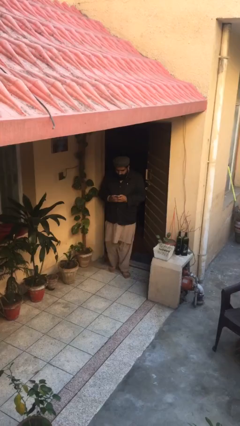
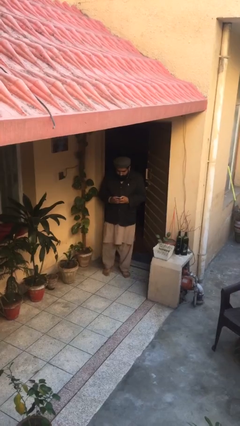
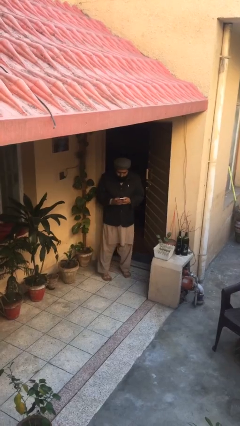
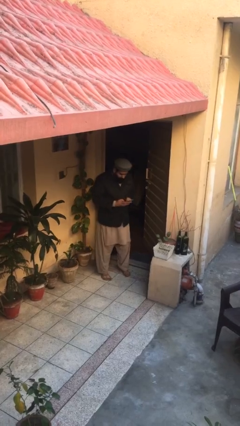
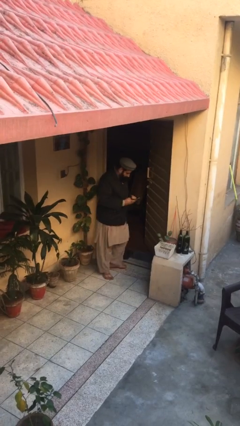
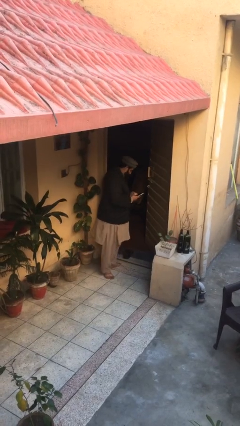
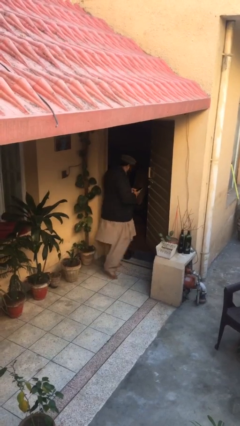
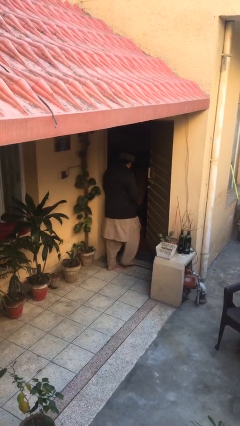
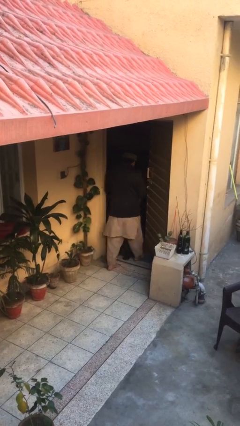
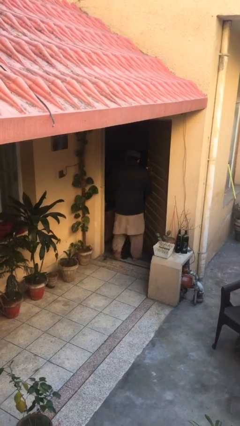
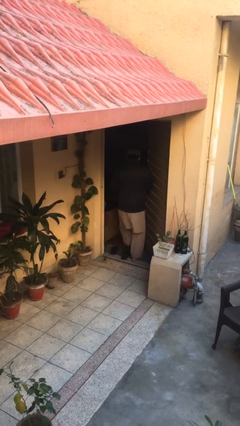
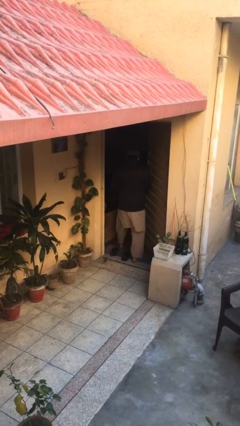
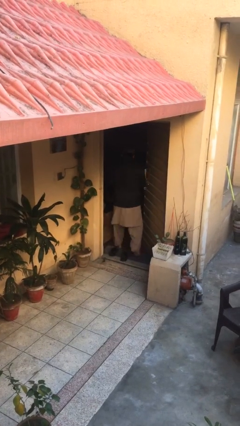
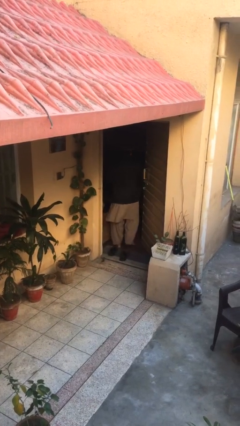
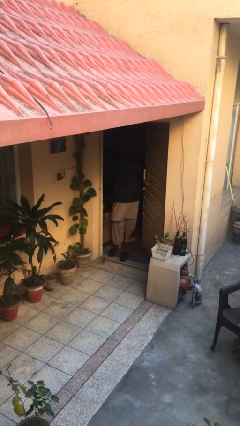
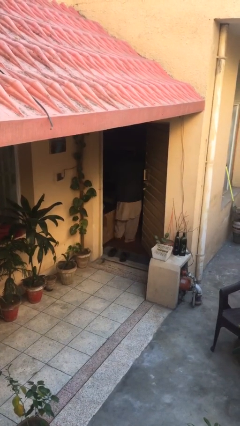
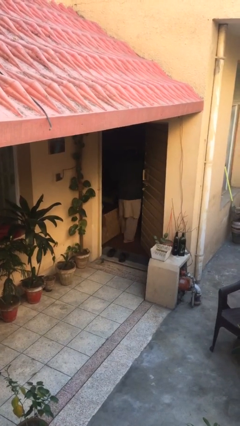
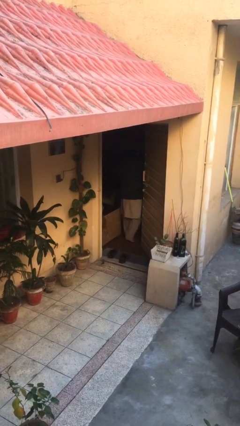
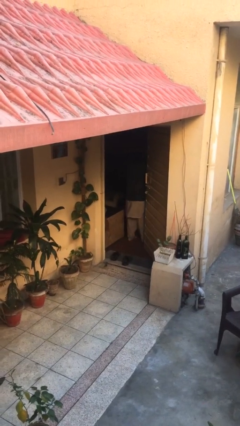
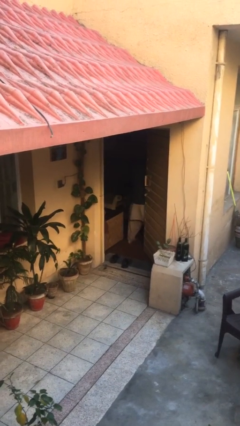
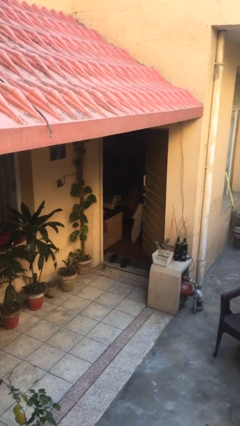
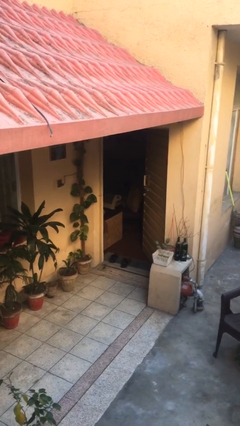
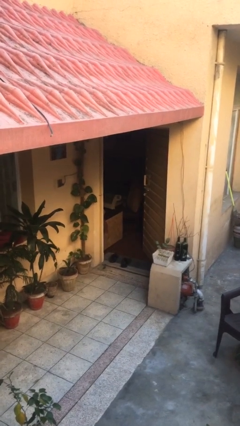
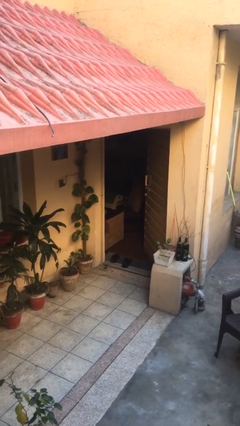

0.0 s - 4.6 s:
person exits scene through structure

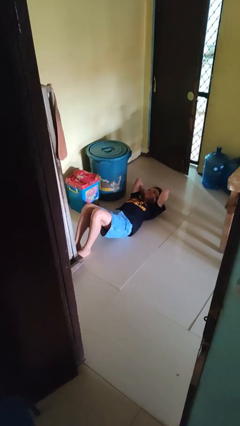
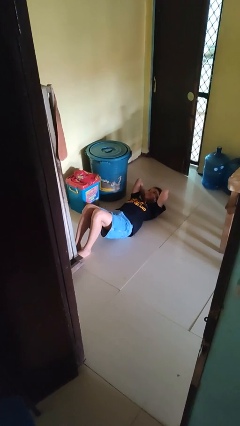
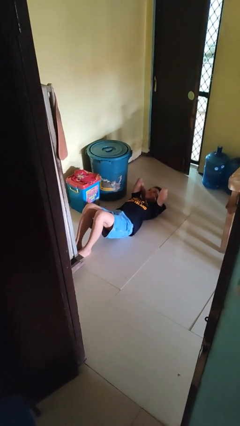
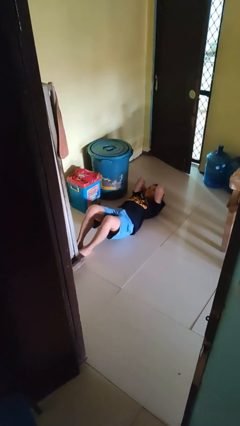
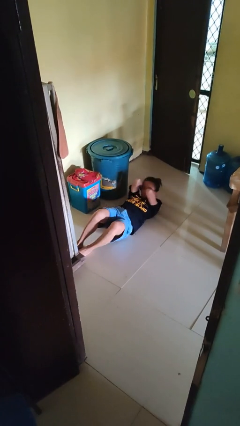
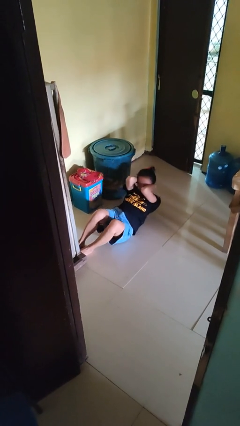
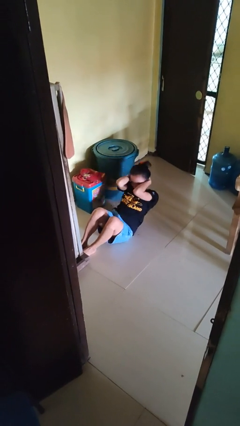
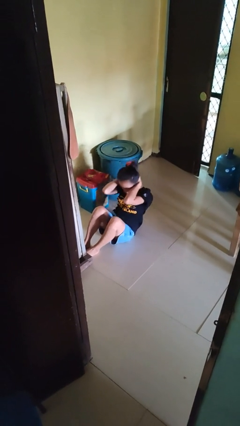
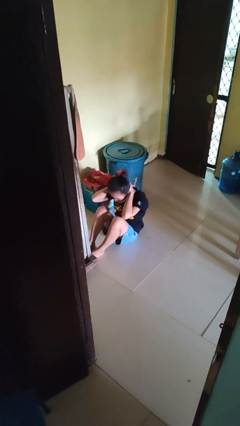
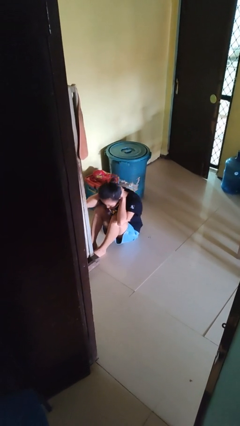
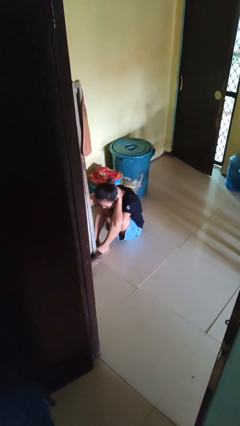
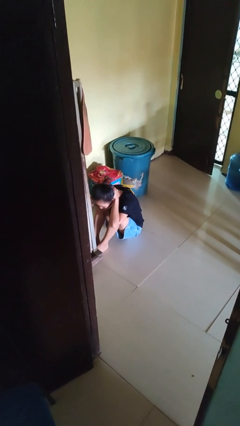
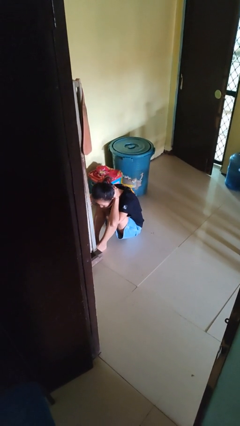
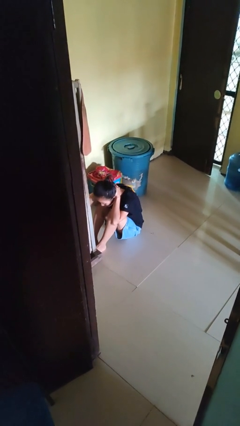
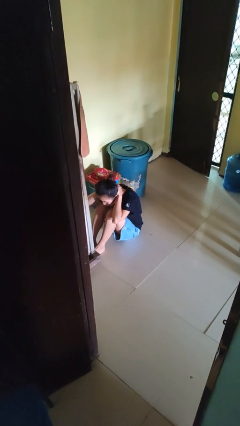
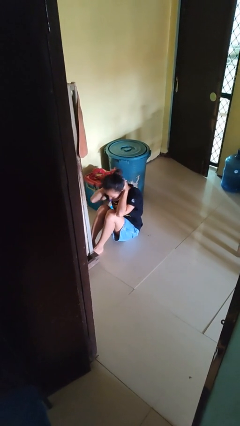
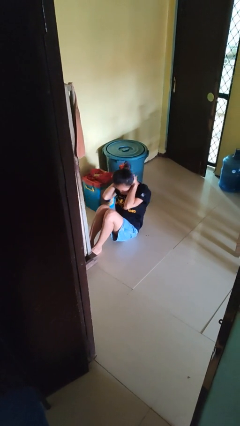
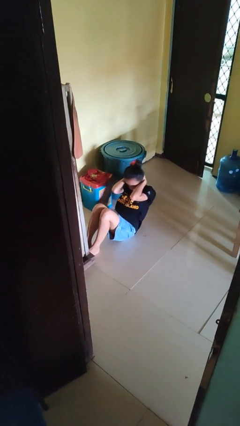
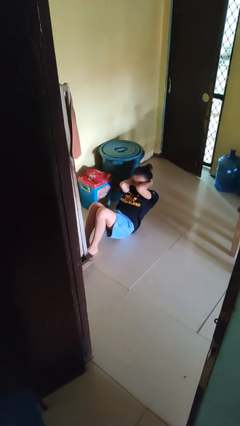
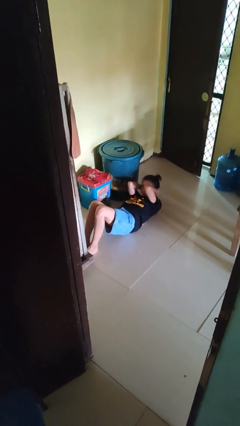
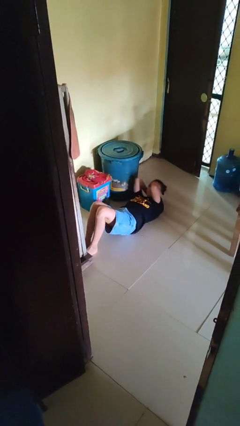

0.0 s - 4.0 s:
person exercises with situp

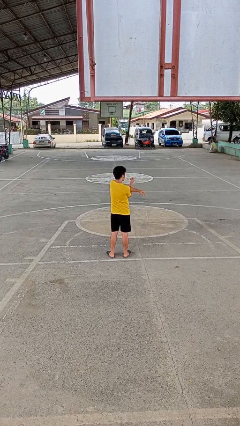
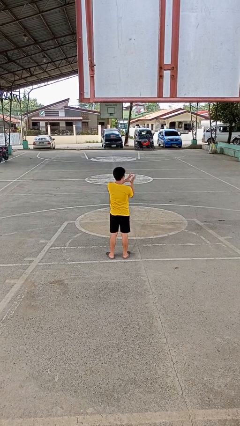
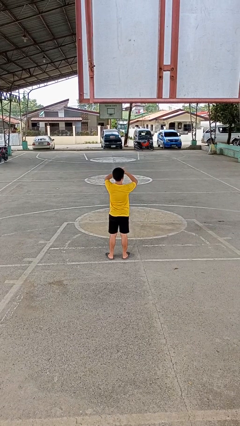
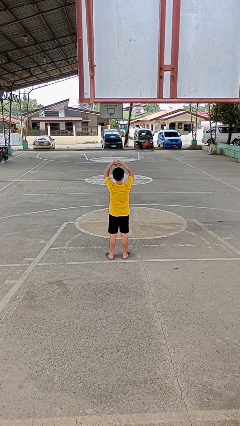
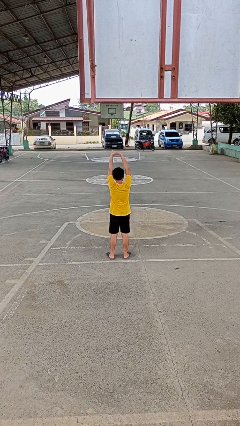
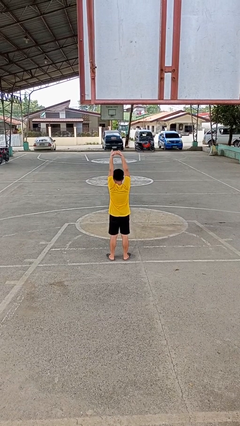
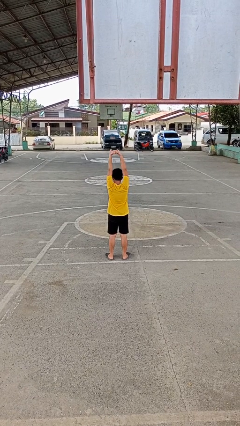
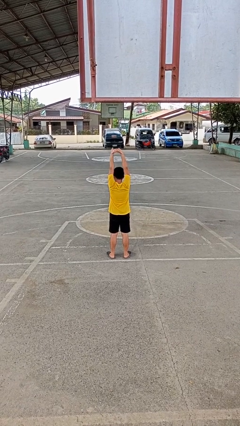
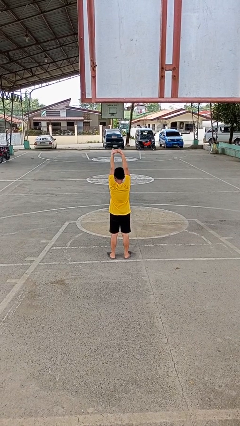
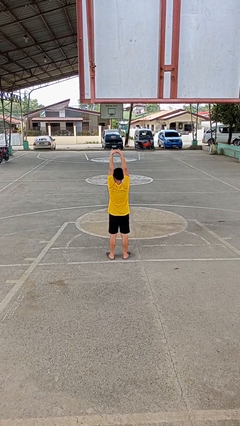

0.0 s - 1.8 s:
person stretches arms over head

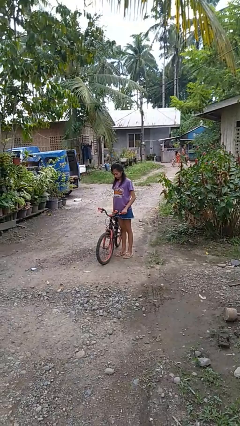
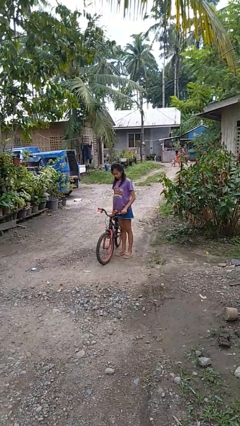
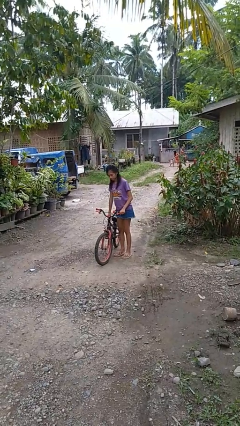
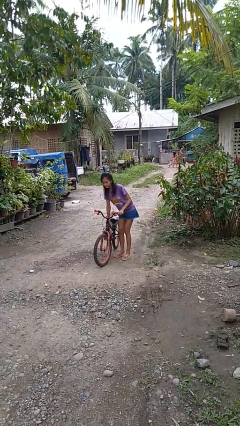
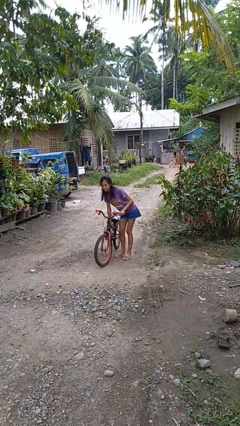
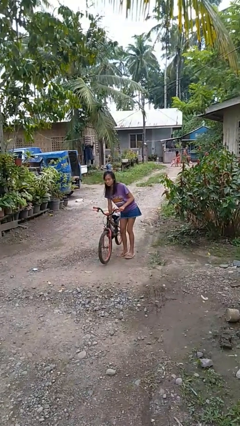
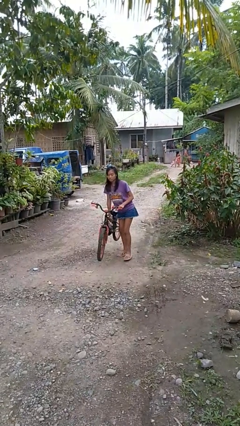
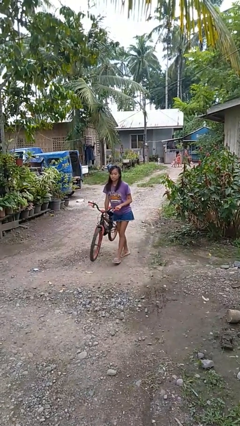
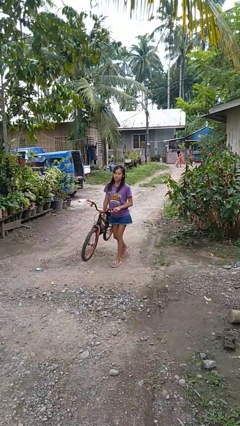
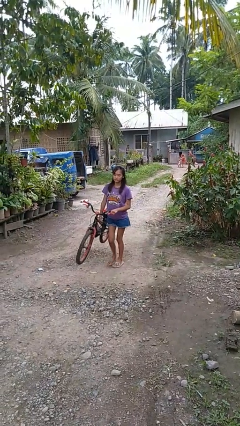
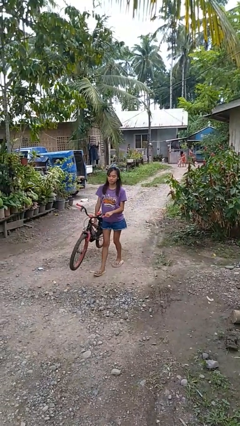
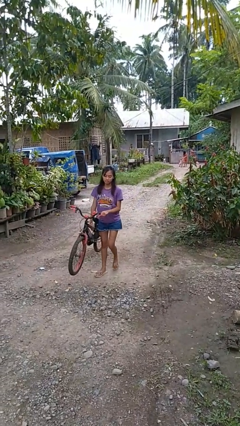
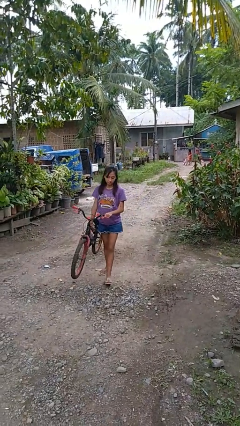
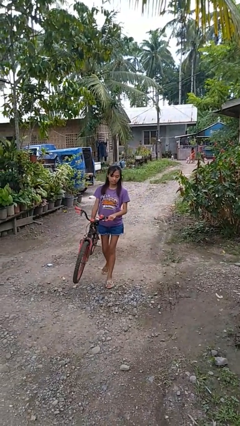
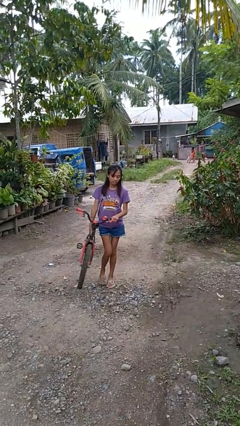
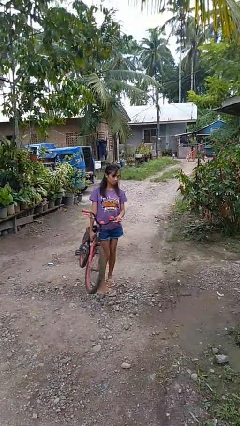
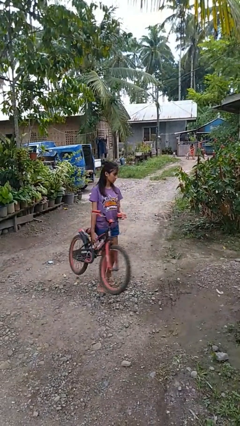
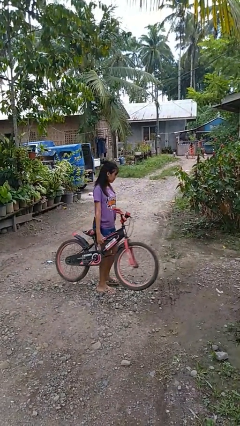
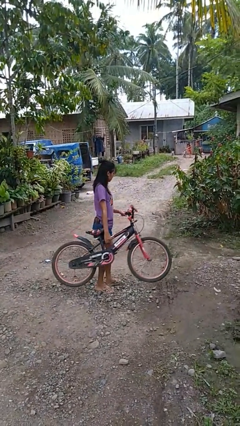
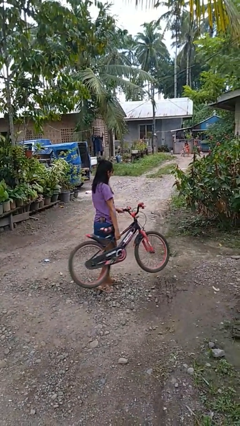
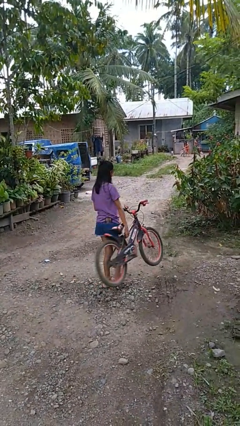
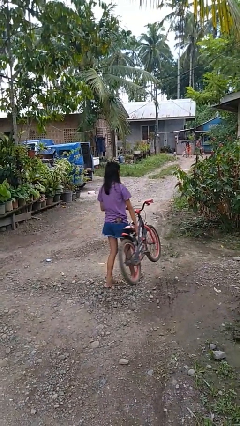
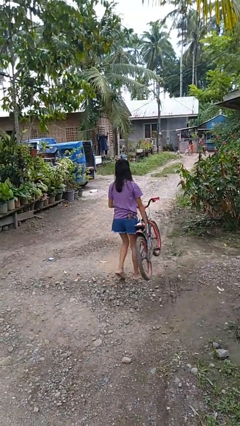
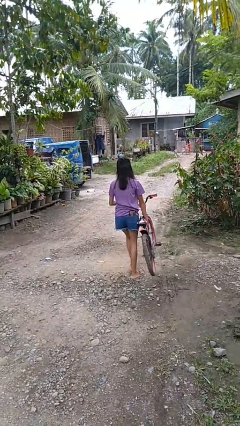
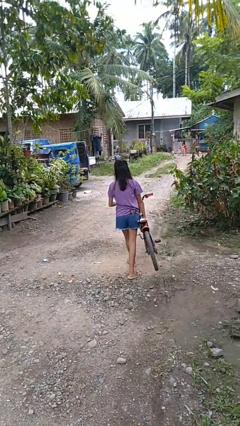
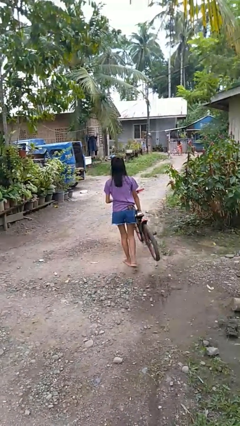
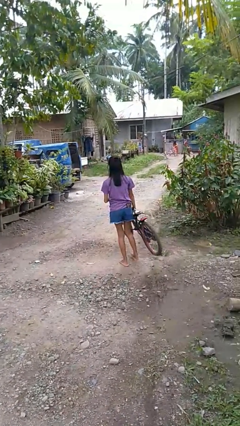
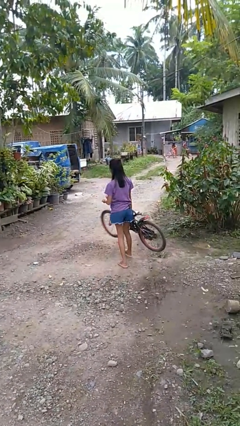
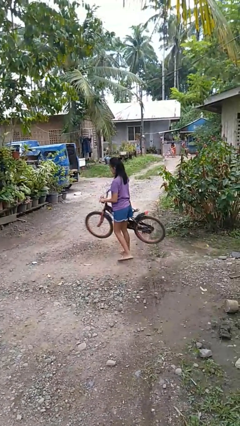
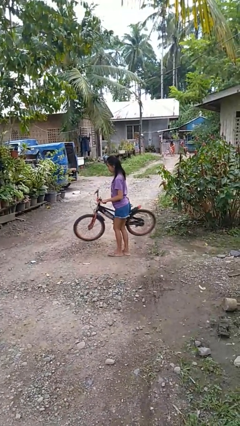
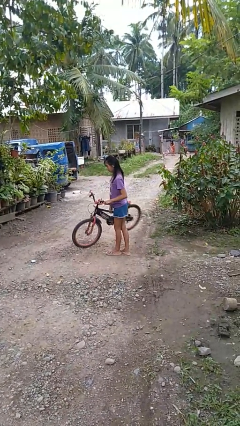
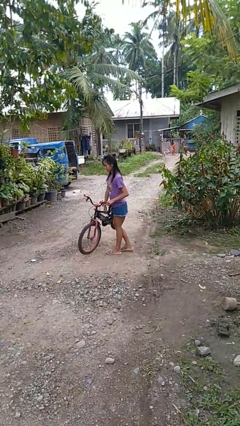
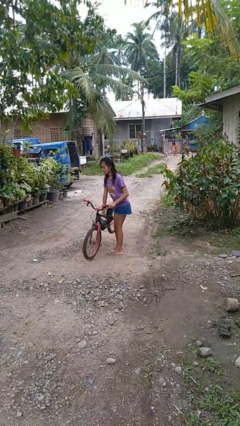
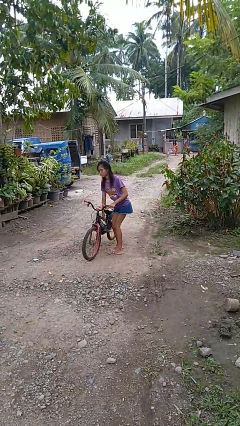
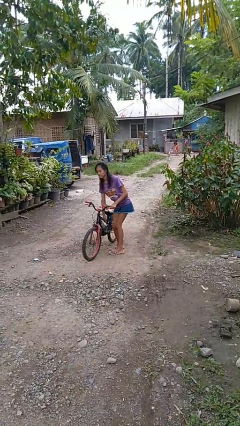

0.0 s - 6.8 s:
person carries bicycle

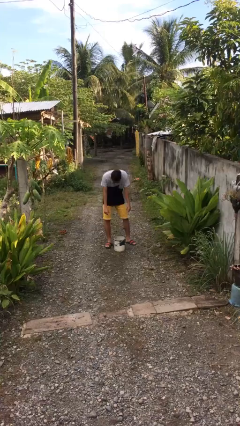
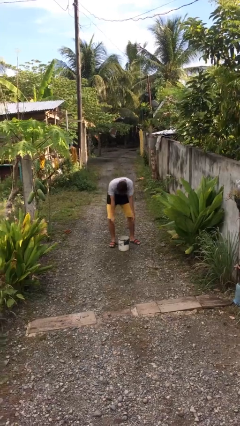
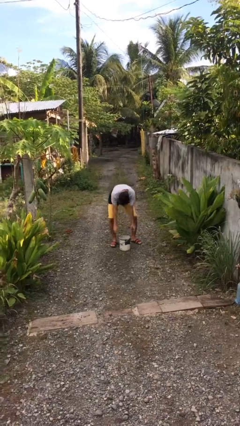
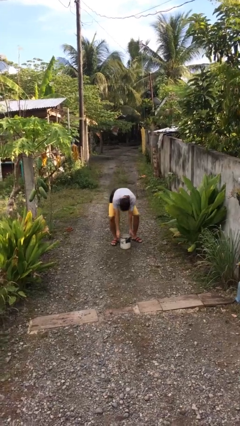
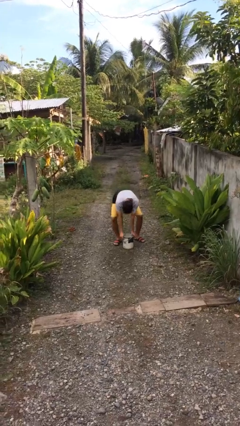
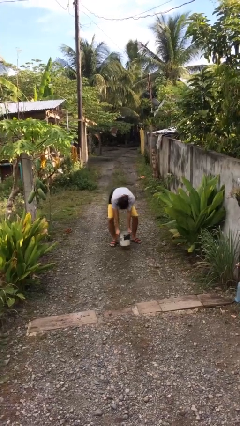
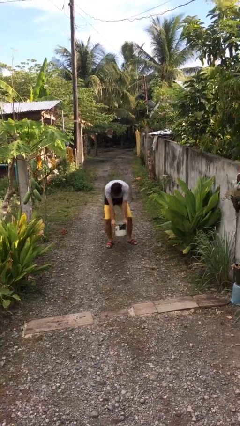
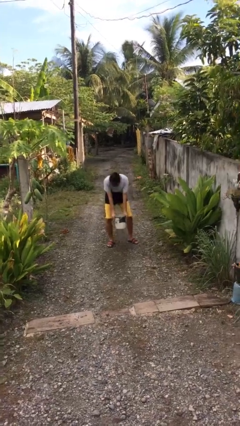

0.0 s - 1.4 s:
person picks up object from floor
